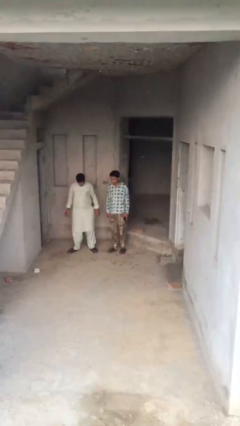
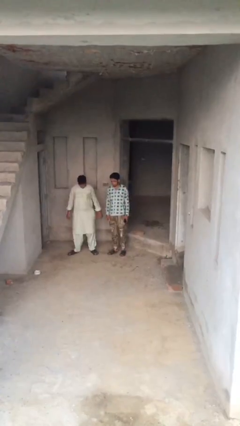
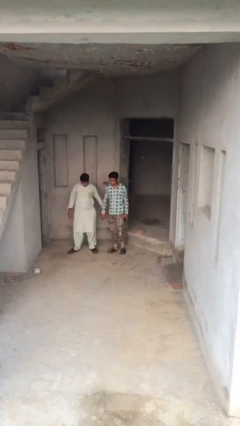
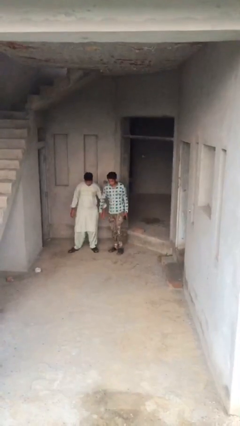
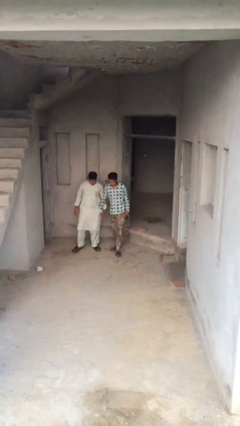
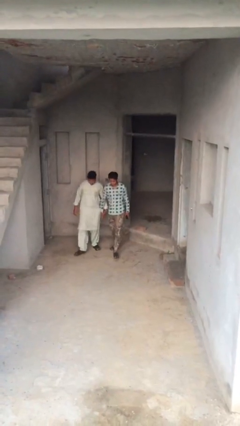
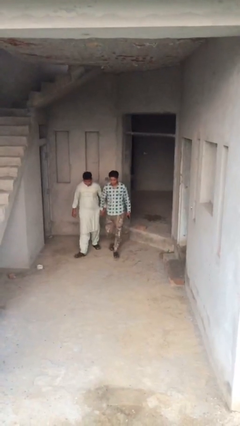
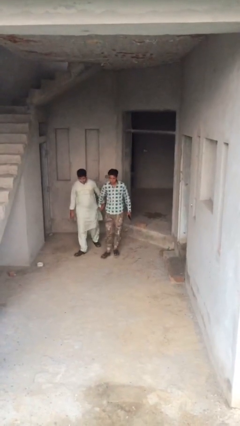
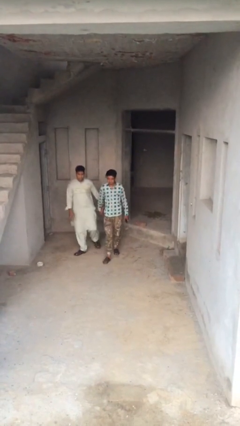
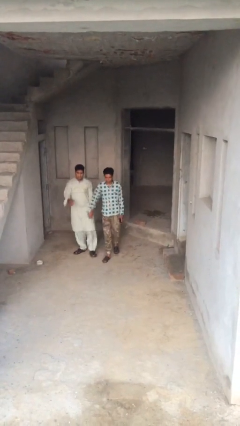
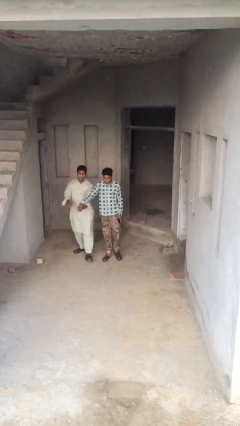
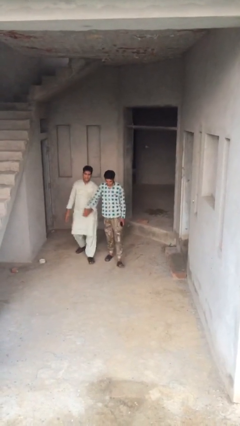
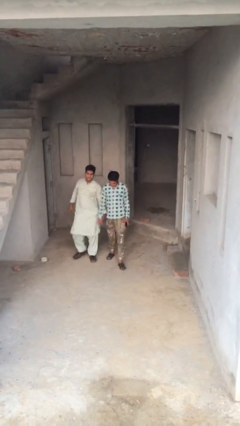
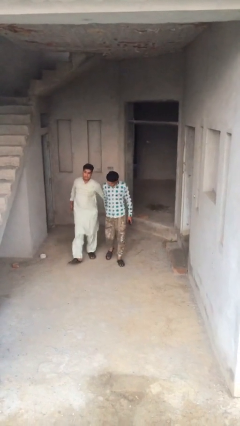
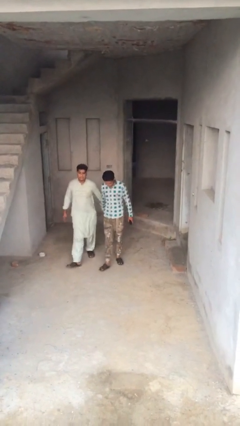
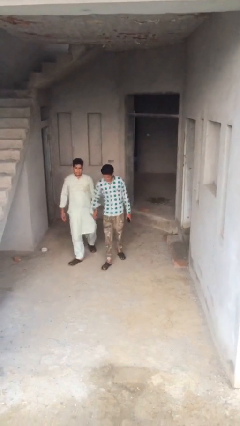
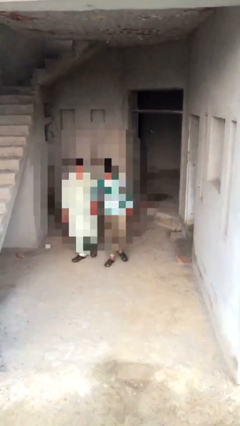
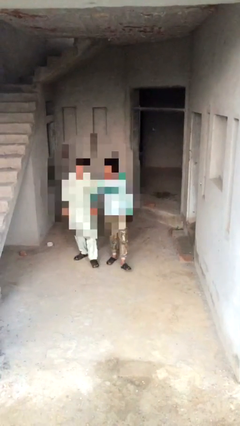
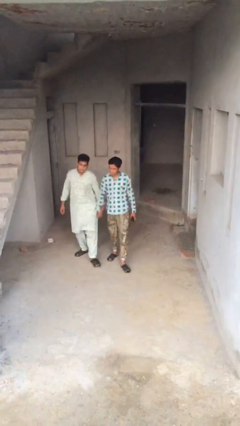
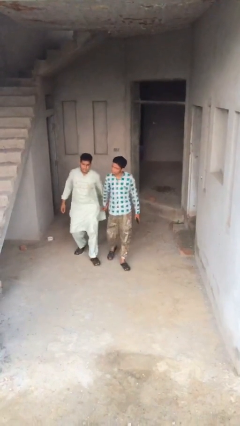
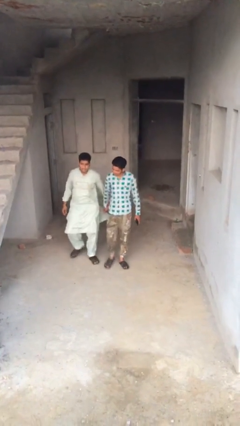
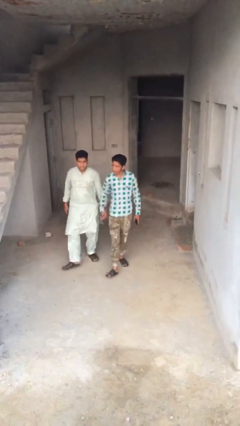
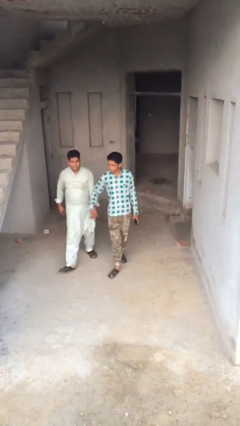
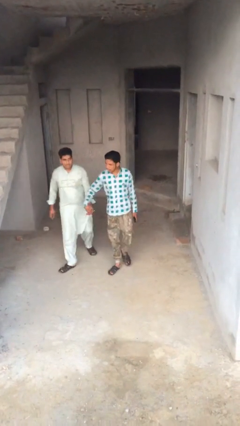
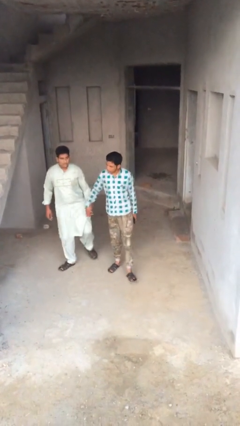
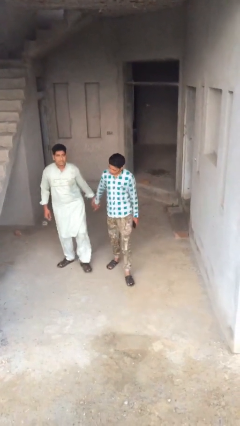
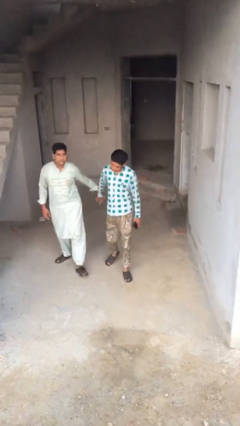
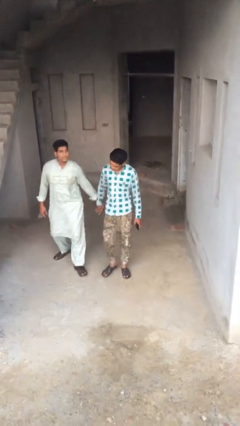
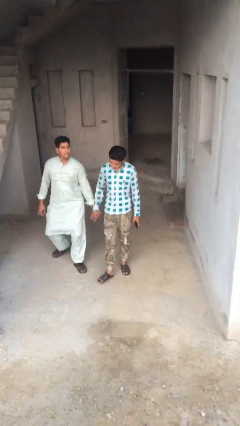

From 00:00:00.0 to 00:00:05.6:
person holds hand

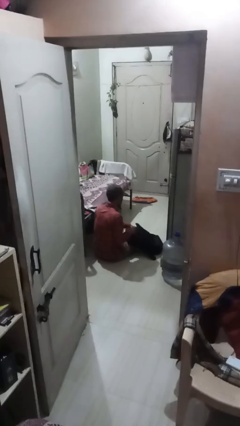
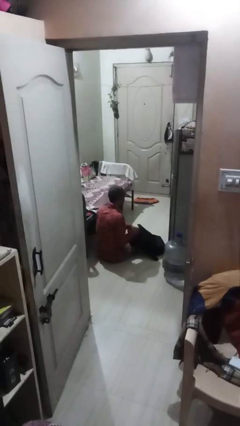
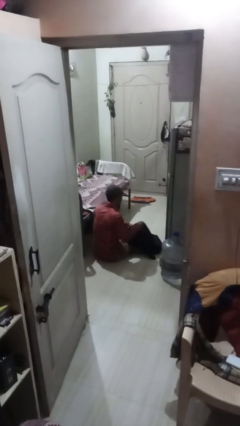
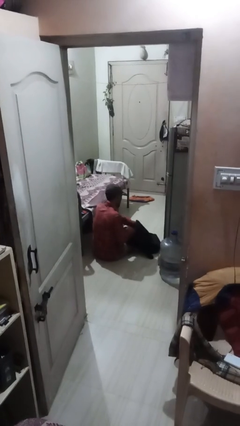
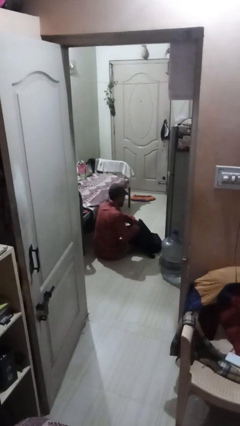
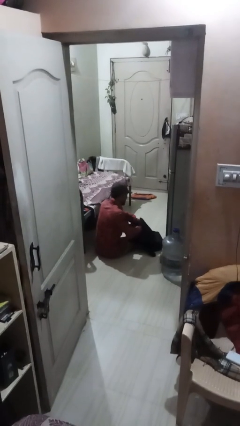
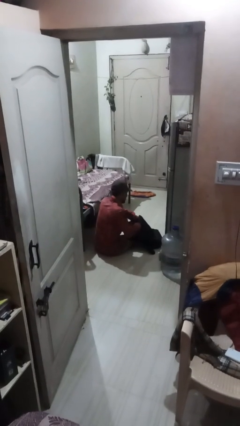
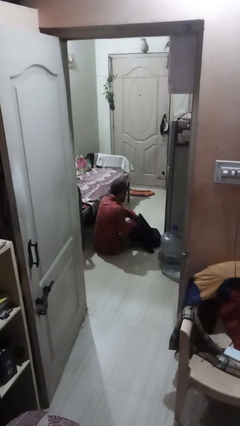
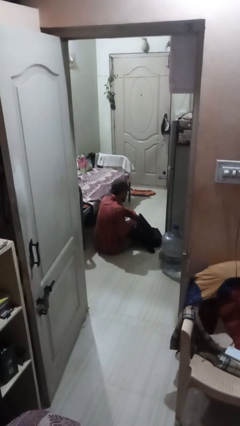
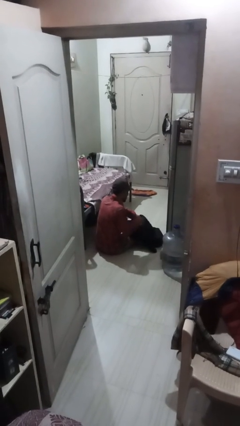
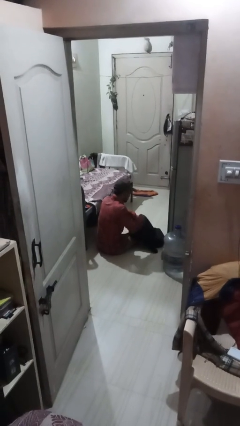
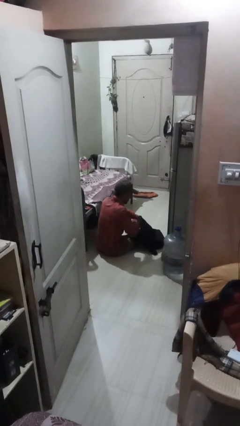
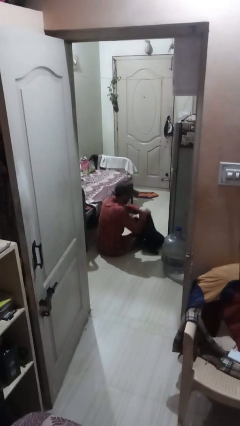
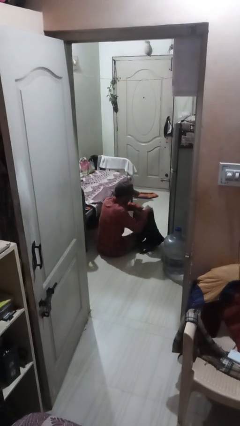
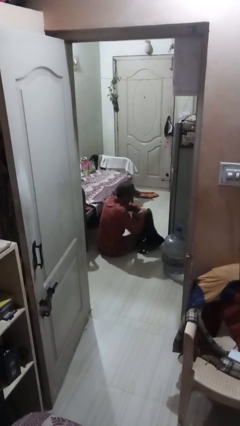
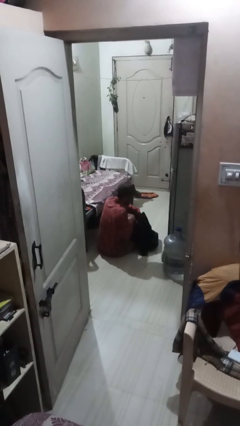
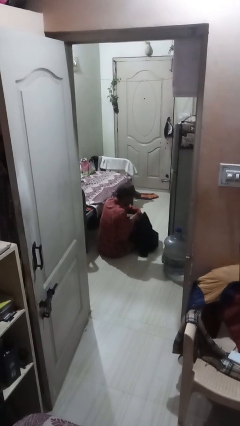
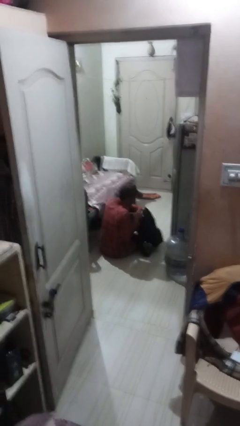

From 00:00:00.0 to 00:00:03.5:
person searches in backpack

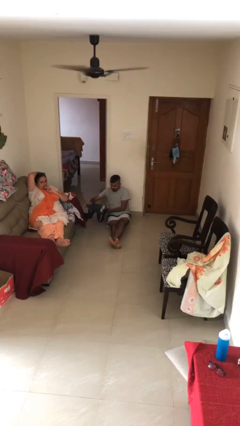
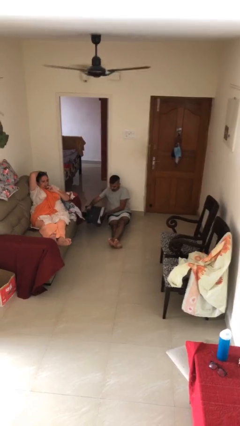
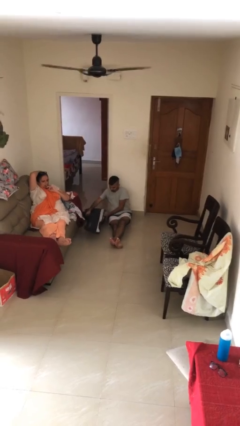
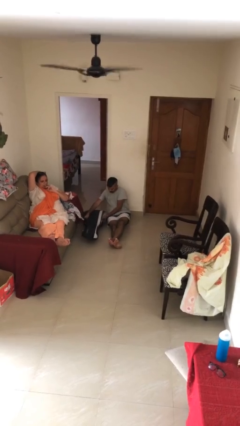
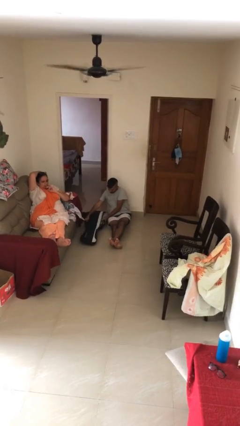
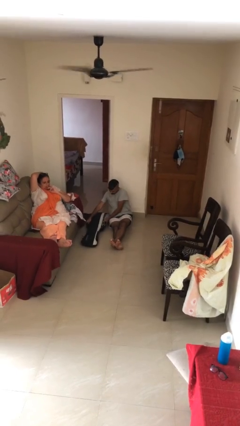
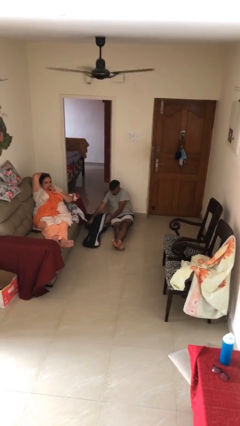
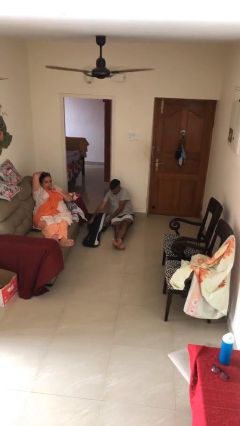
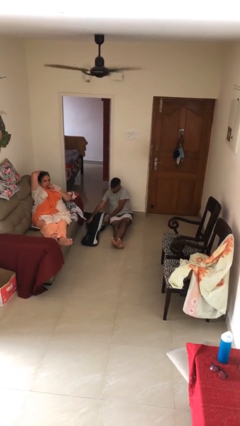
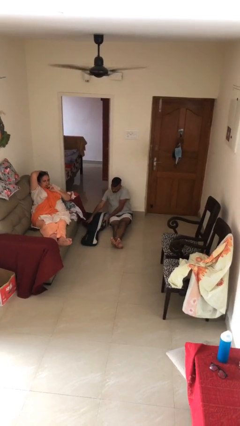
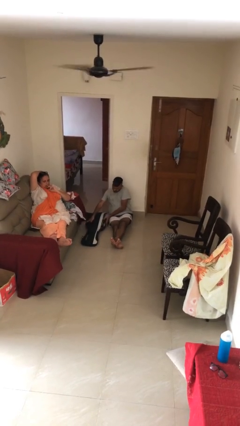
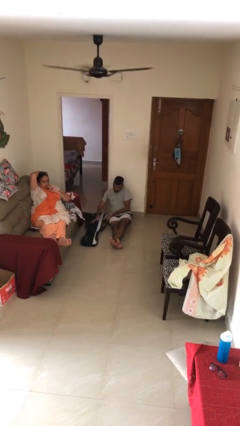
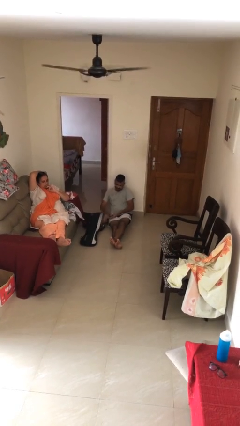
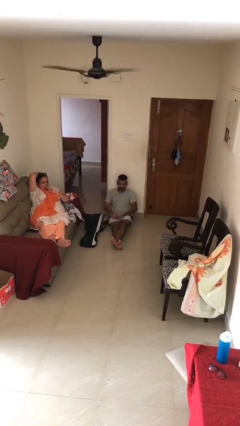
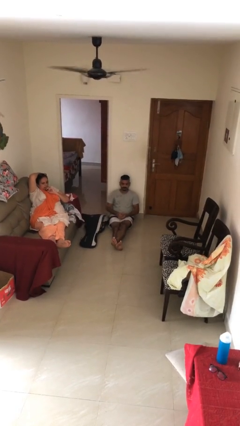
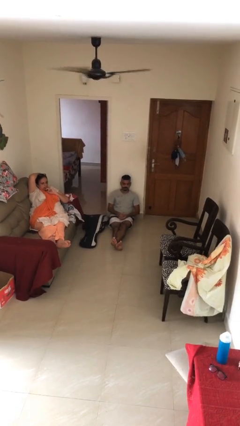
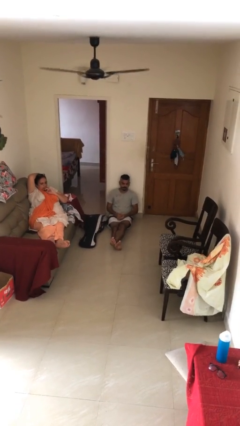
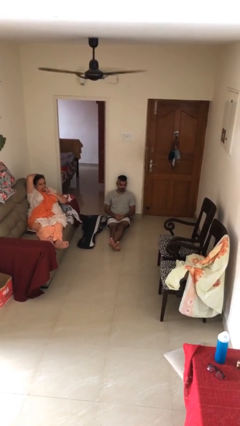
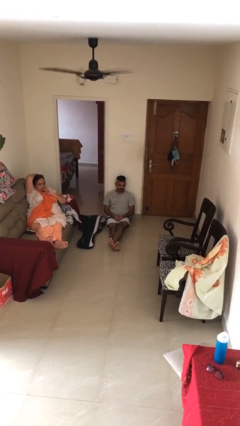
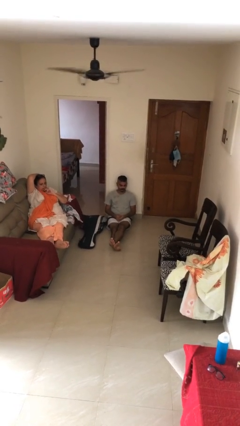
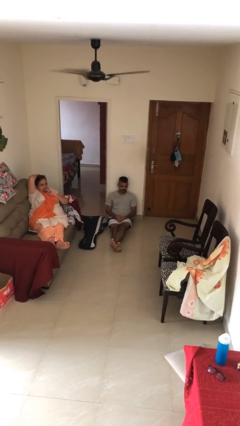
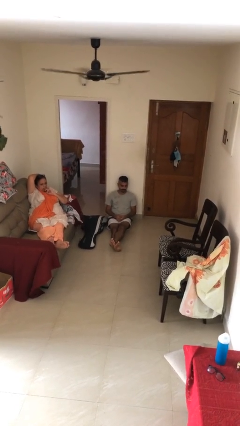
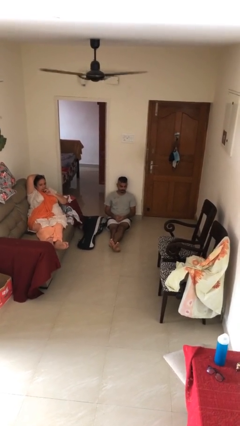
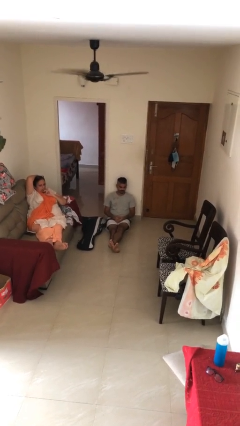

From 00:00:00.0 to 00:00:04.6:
person puts down object on floor

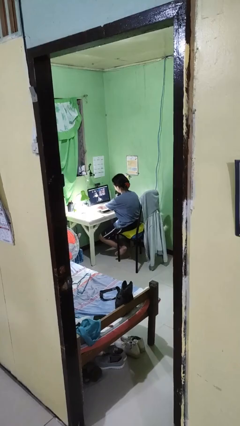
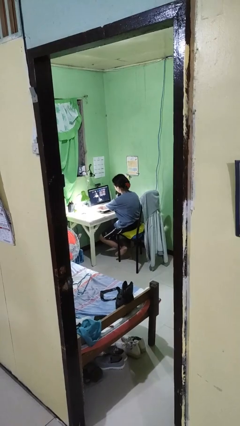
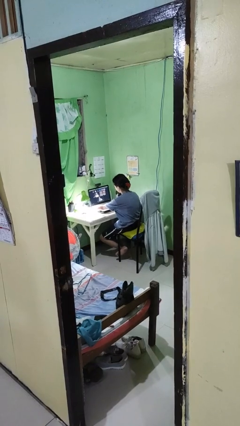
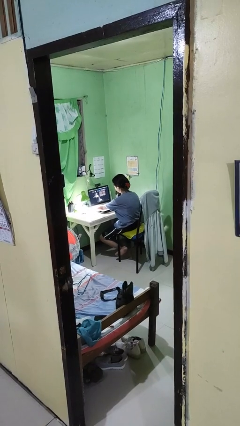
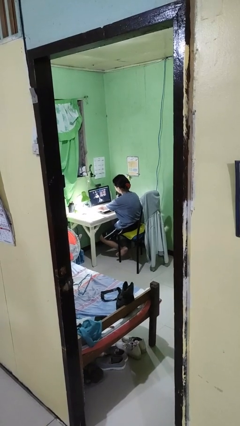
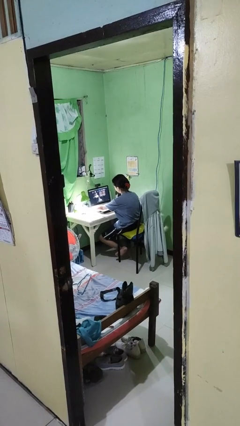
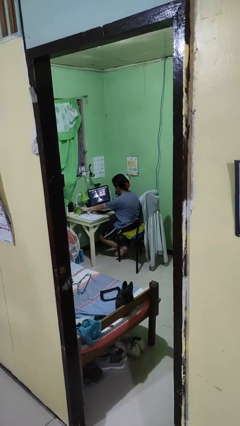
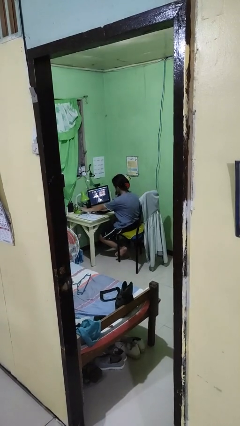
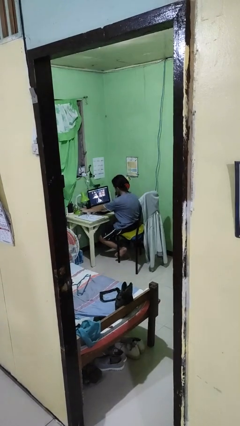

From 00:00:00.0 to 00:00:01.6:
person turns off lamp

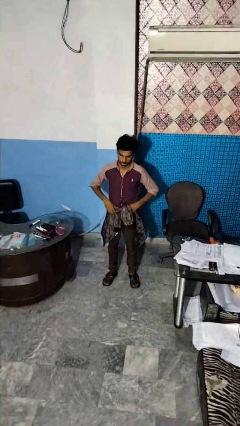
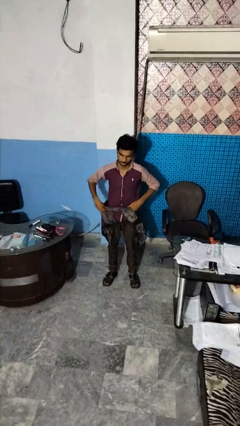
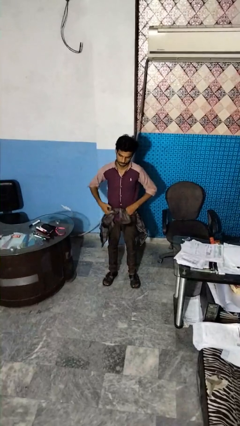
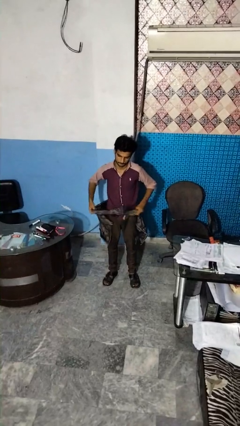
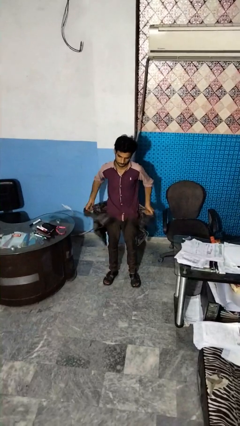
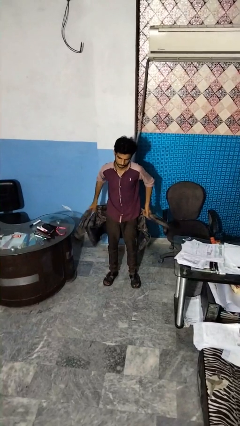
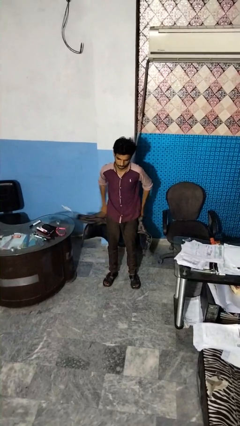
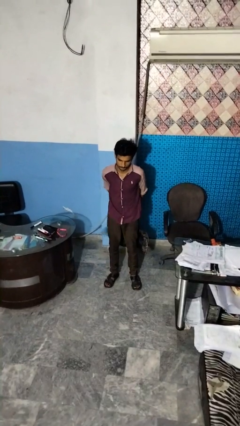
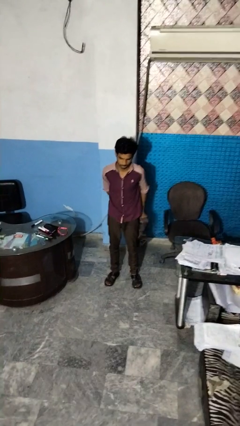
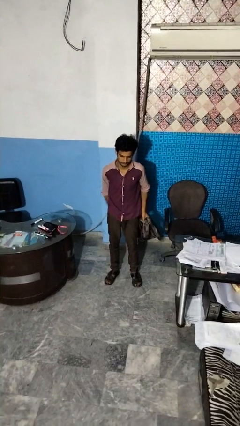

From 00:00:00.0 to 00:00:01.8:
person unties jacket around waist

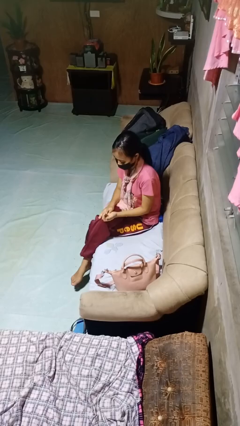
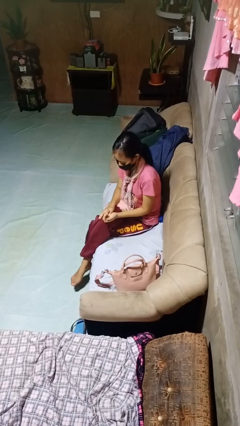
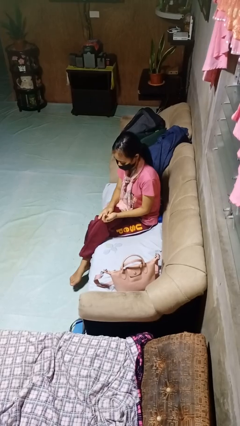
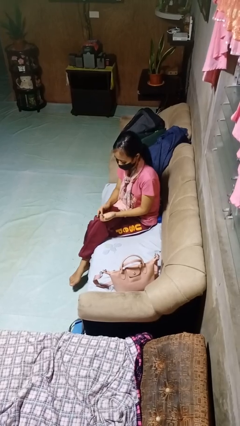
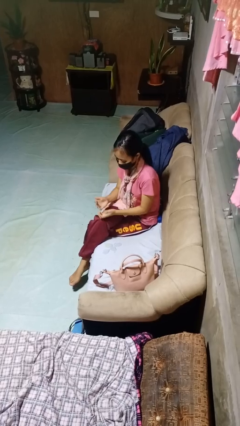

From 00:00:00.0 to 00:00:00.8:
person takes off ring
